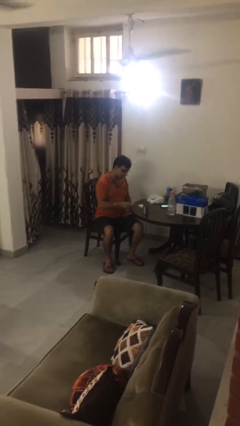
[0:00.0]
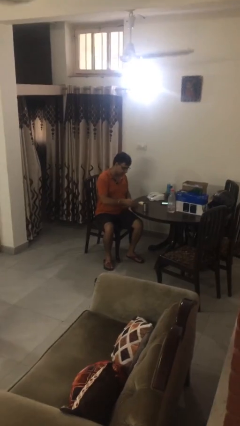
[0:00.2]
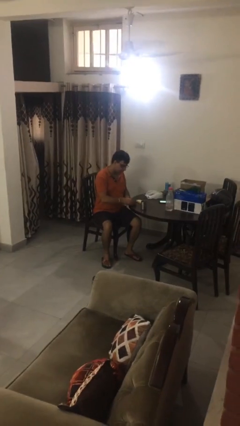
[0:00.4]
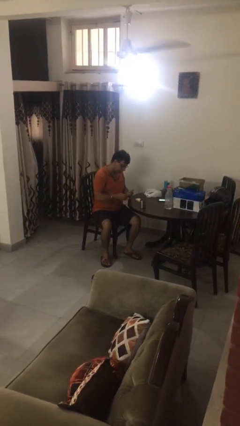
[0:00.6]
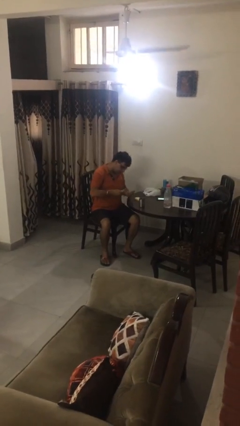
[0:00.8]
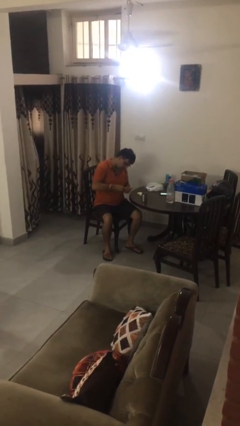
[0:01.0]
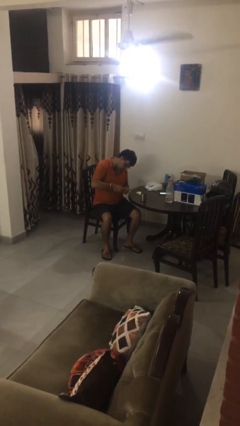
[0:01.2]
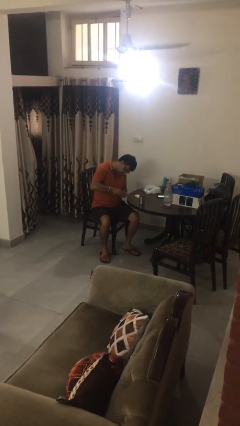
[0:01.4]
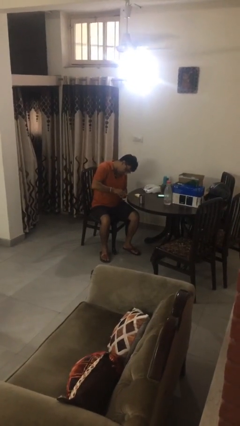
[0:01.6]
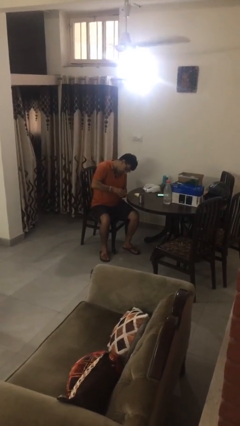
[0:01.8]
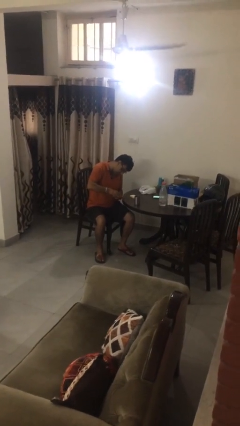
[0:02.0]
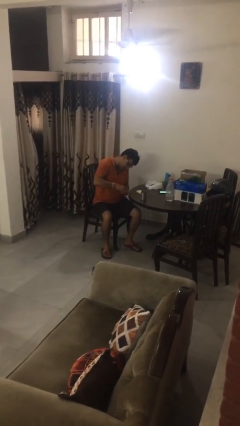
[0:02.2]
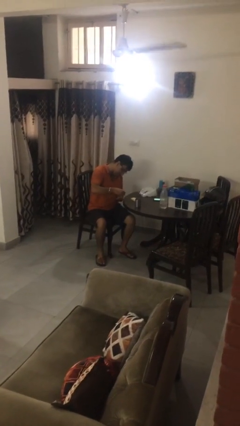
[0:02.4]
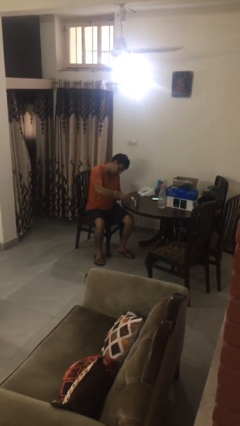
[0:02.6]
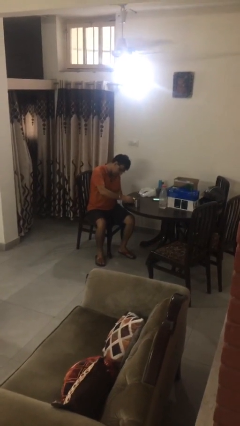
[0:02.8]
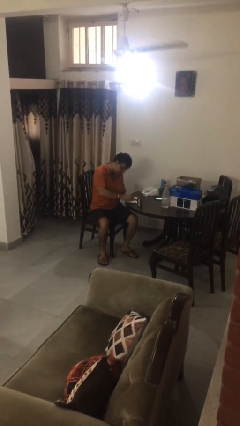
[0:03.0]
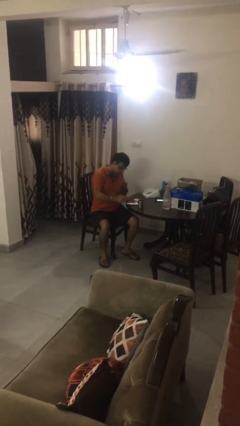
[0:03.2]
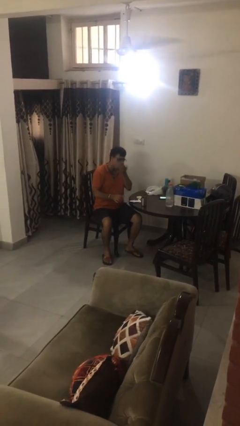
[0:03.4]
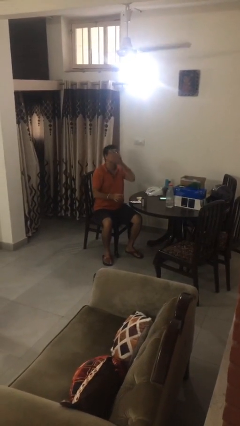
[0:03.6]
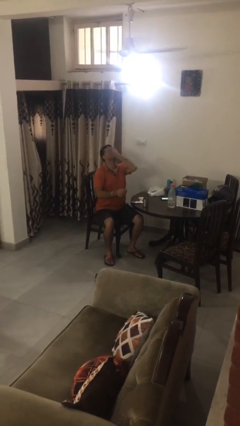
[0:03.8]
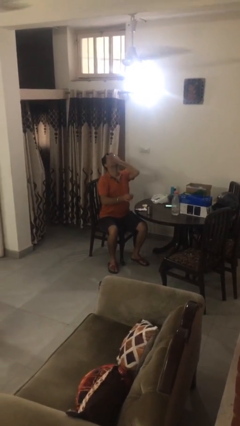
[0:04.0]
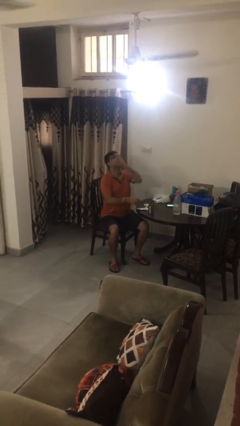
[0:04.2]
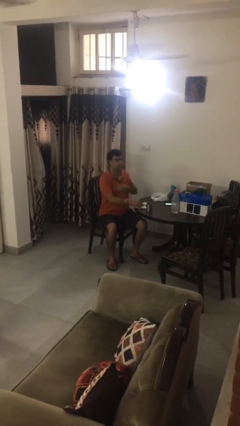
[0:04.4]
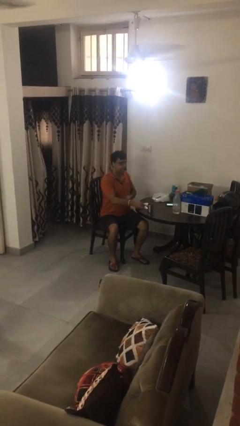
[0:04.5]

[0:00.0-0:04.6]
person takes medicine pills

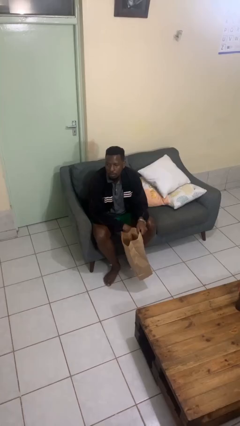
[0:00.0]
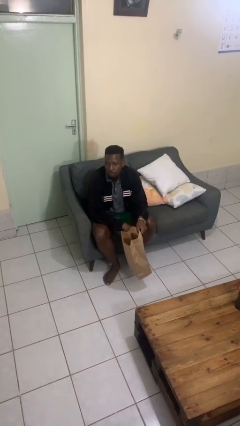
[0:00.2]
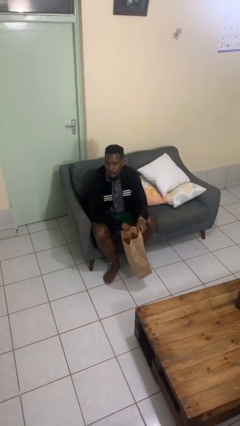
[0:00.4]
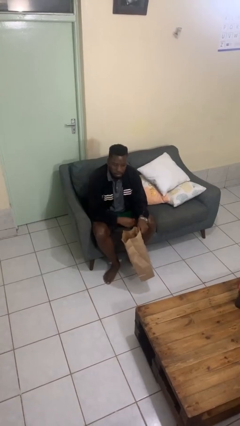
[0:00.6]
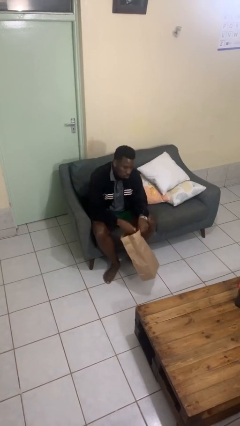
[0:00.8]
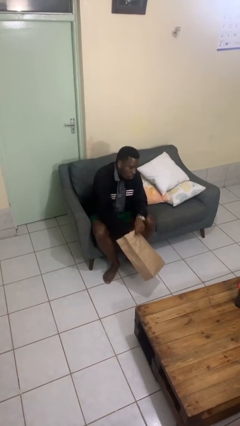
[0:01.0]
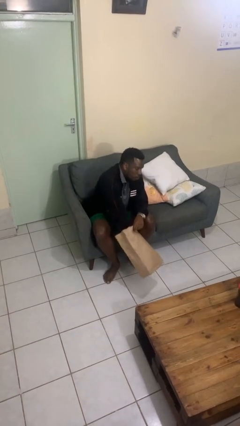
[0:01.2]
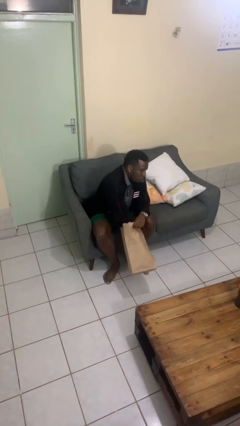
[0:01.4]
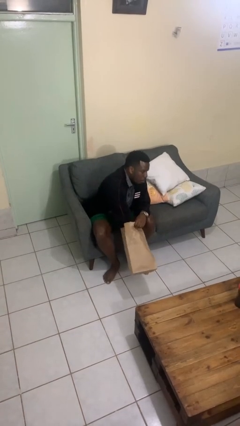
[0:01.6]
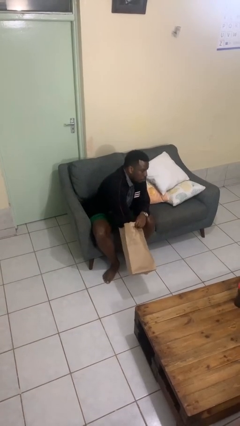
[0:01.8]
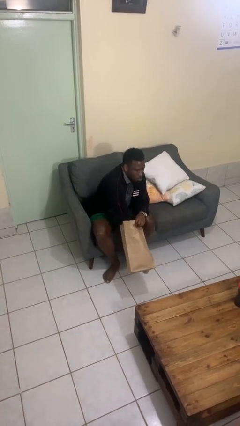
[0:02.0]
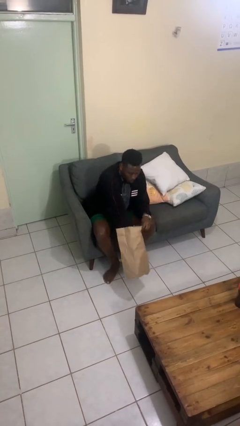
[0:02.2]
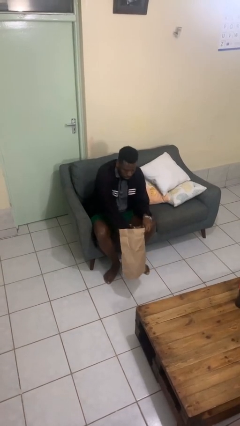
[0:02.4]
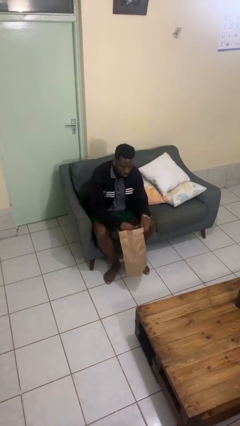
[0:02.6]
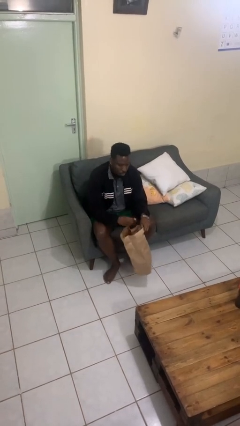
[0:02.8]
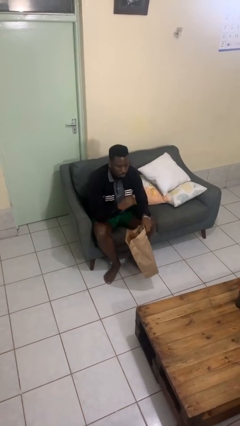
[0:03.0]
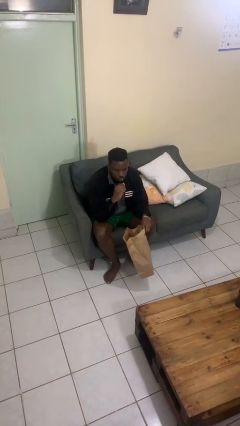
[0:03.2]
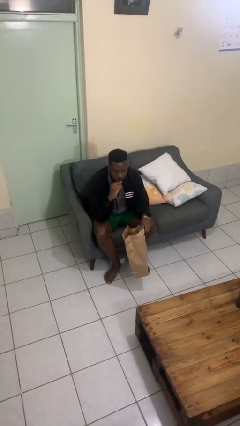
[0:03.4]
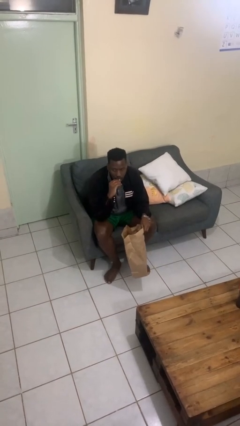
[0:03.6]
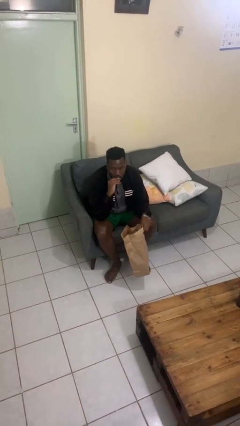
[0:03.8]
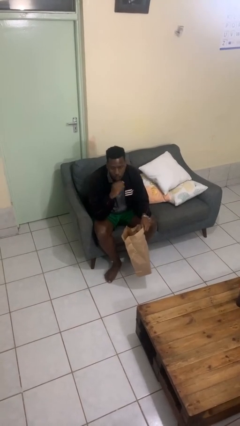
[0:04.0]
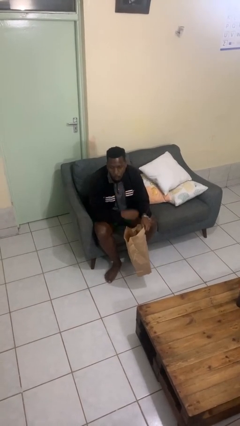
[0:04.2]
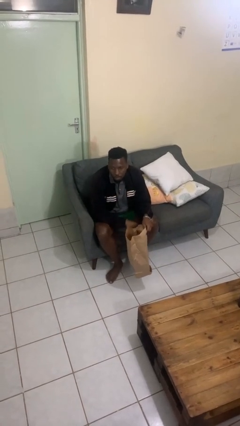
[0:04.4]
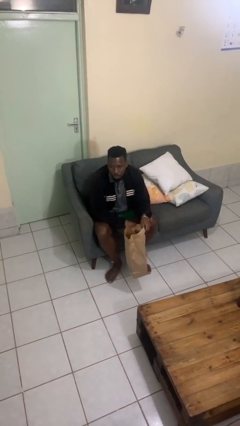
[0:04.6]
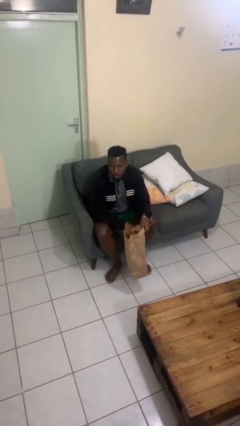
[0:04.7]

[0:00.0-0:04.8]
person eats snack from bag

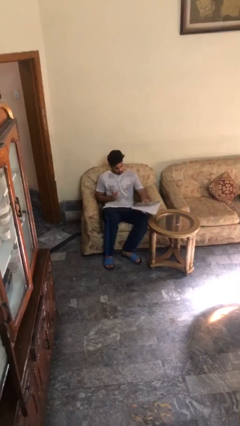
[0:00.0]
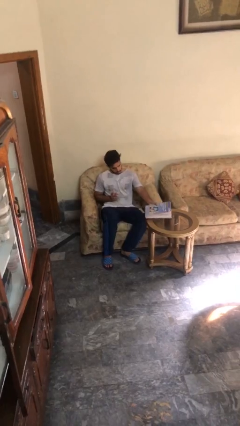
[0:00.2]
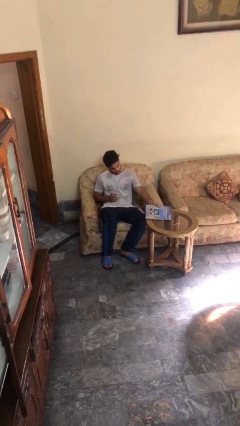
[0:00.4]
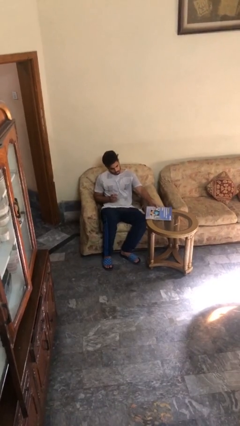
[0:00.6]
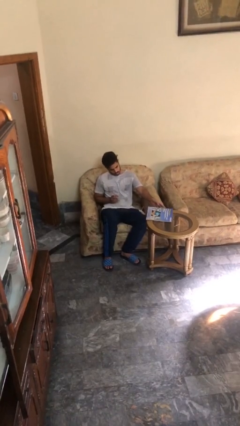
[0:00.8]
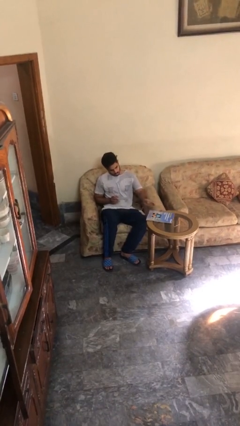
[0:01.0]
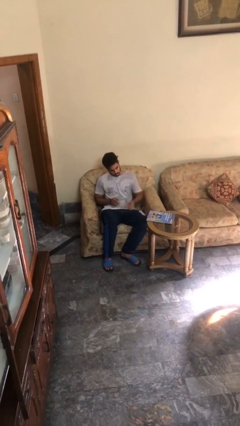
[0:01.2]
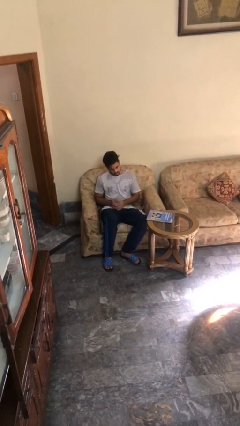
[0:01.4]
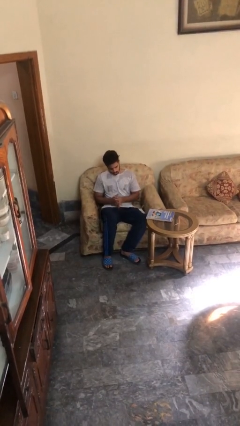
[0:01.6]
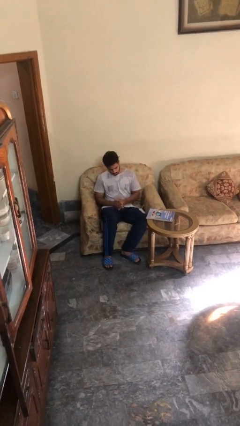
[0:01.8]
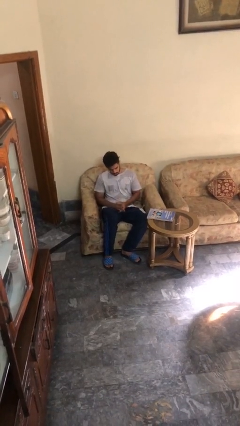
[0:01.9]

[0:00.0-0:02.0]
person puts down object on table

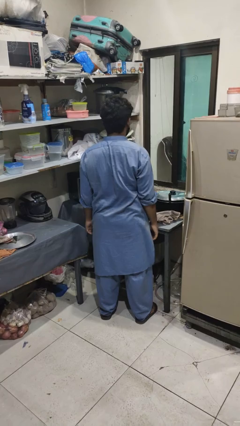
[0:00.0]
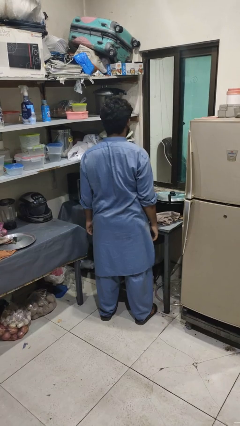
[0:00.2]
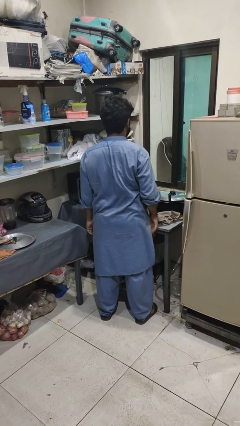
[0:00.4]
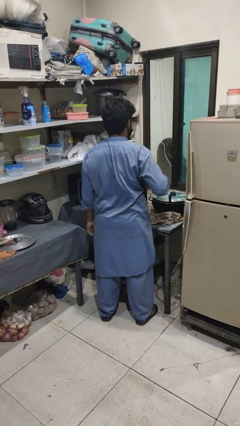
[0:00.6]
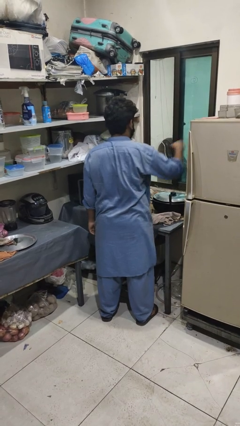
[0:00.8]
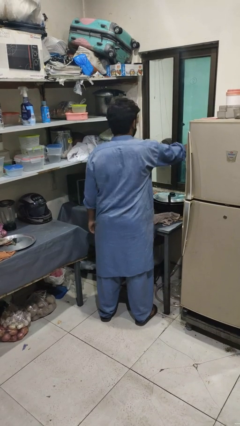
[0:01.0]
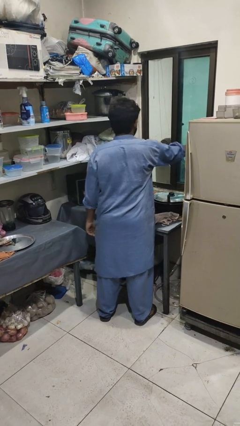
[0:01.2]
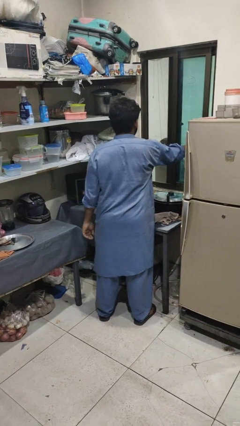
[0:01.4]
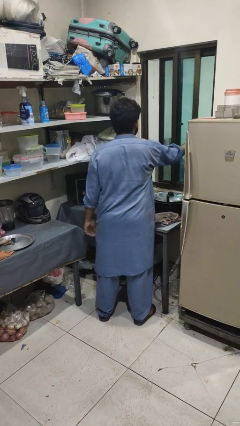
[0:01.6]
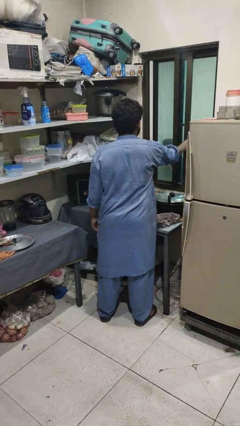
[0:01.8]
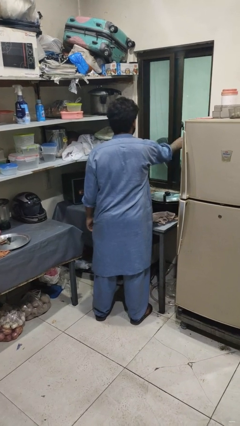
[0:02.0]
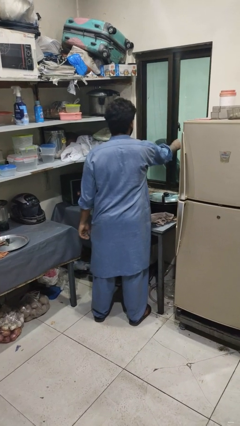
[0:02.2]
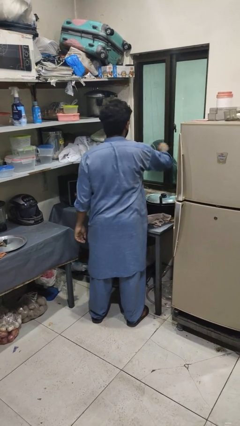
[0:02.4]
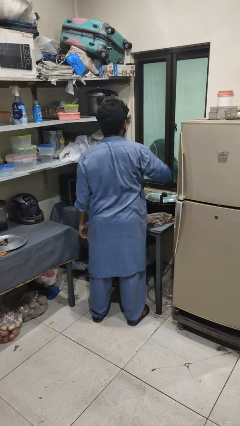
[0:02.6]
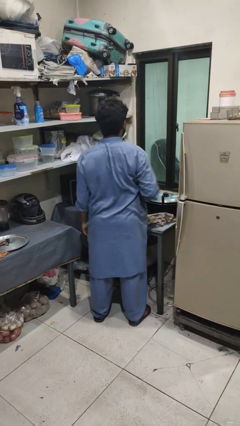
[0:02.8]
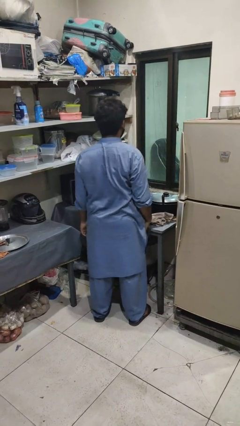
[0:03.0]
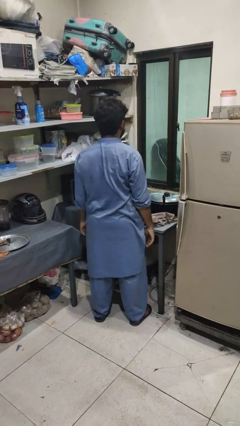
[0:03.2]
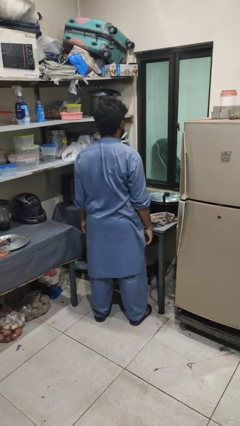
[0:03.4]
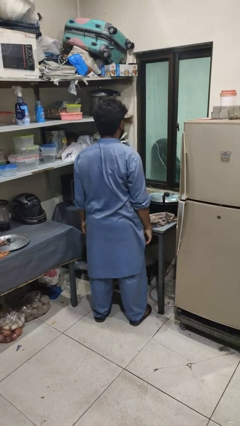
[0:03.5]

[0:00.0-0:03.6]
person closes home window

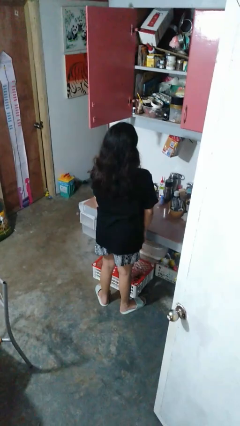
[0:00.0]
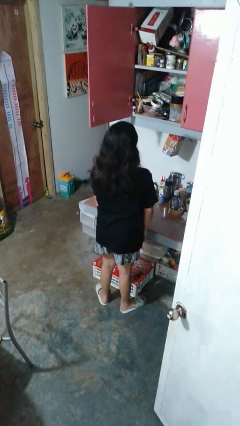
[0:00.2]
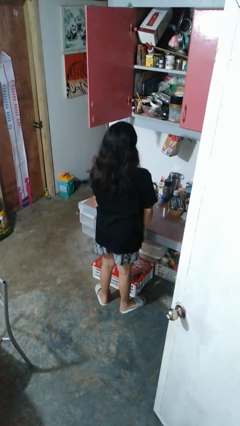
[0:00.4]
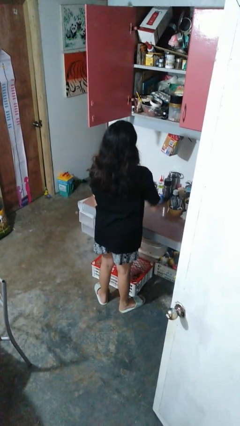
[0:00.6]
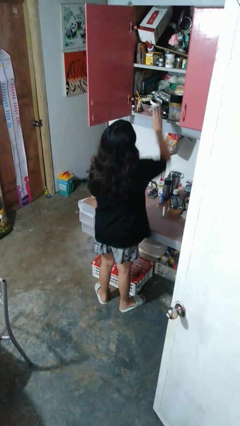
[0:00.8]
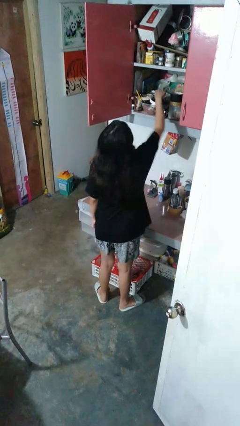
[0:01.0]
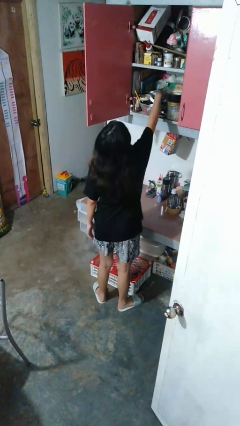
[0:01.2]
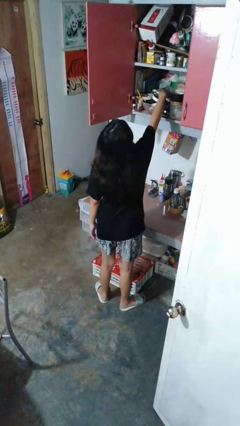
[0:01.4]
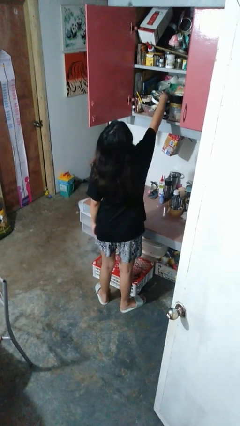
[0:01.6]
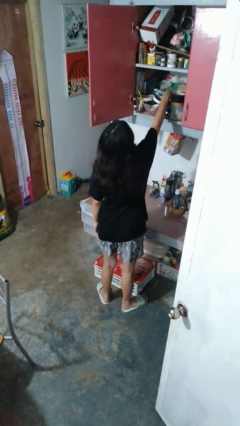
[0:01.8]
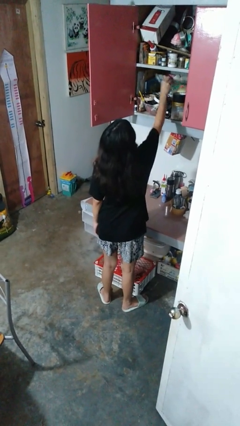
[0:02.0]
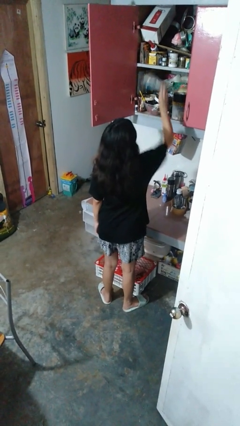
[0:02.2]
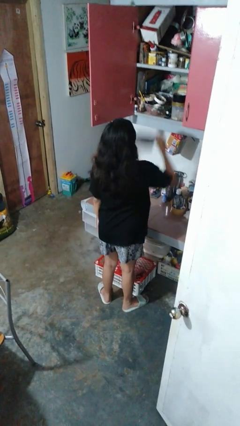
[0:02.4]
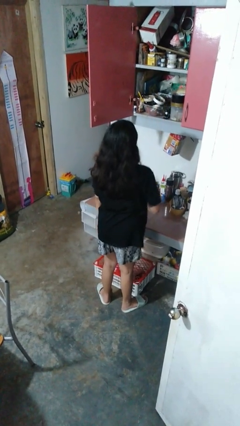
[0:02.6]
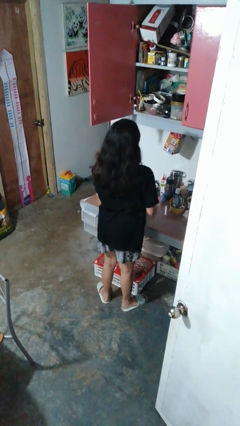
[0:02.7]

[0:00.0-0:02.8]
person takes object from cabinet
